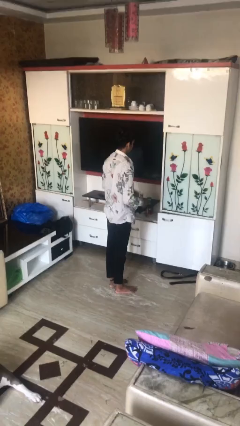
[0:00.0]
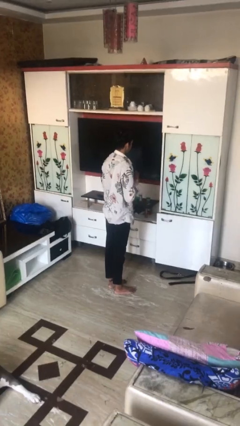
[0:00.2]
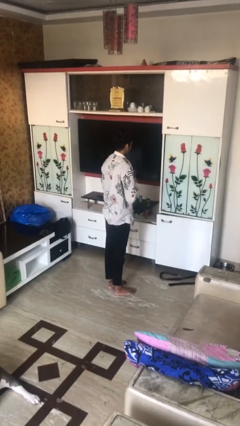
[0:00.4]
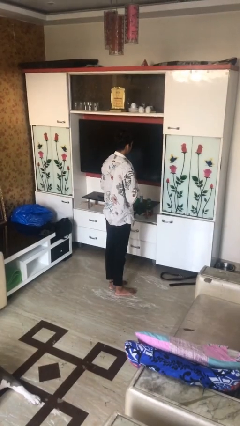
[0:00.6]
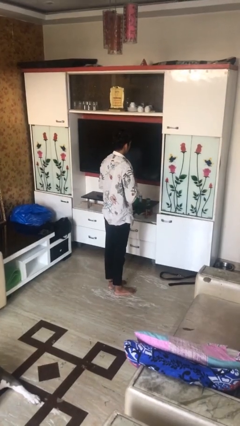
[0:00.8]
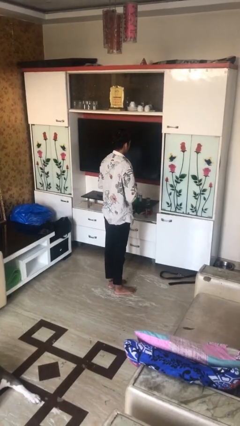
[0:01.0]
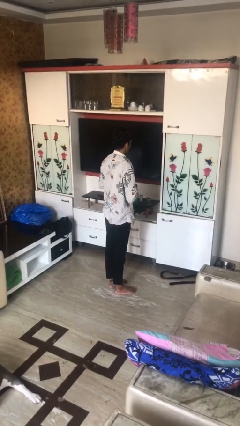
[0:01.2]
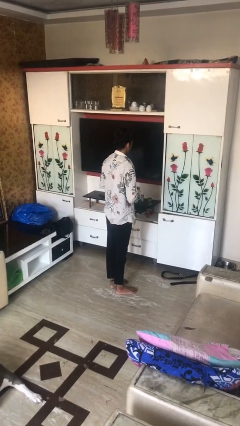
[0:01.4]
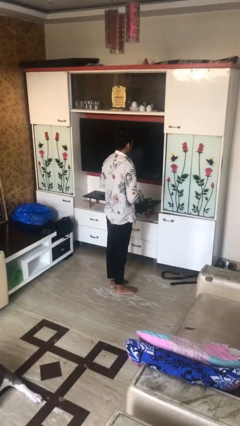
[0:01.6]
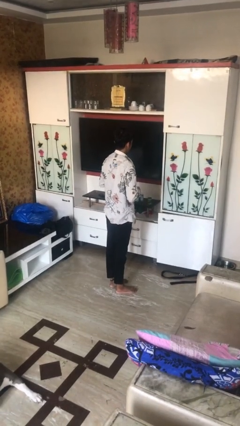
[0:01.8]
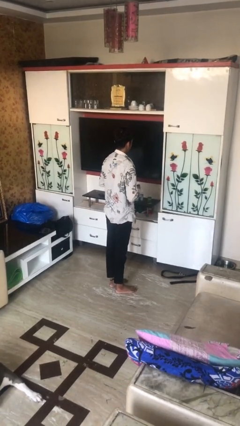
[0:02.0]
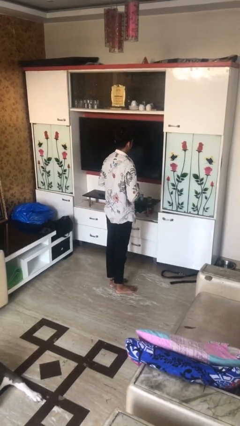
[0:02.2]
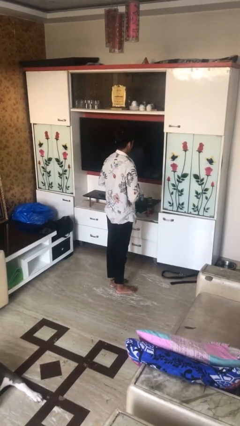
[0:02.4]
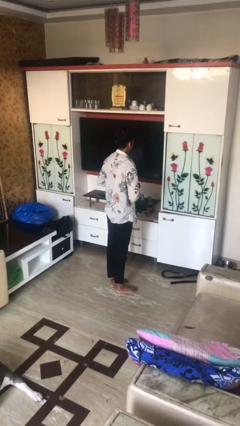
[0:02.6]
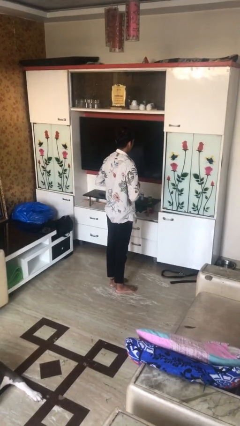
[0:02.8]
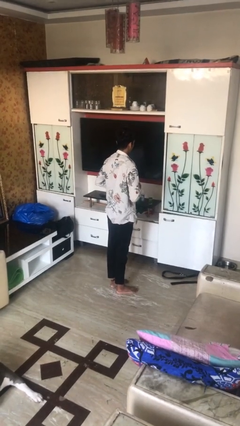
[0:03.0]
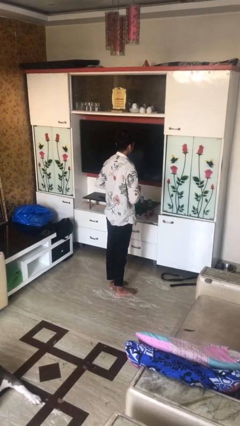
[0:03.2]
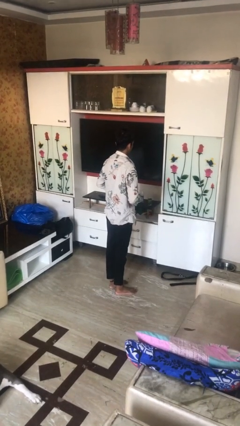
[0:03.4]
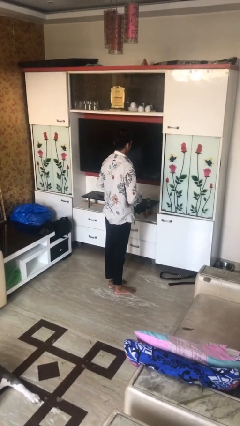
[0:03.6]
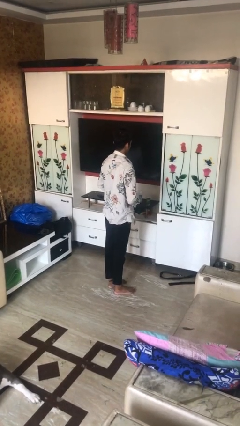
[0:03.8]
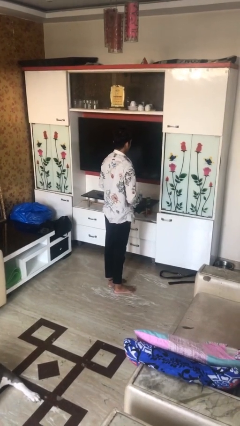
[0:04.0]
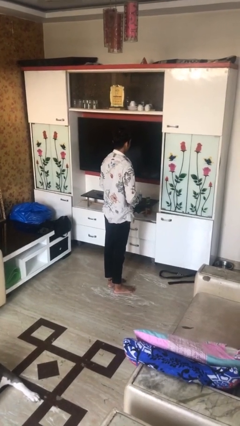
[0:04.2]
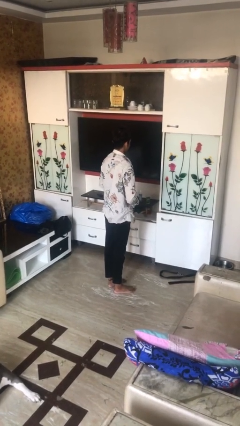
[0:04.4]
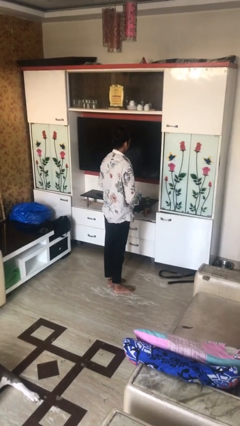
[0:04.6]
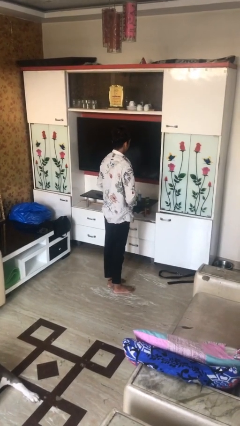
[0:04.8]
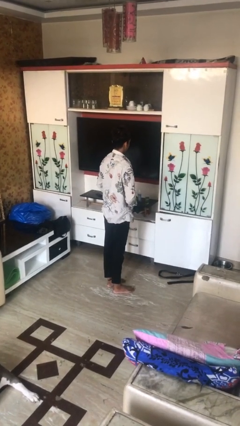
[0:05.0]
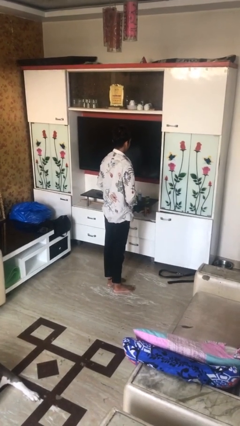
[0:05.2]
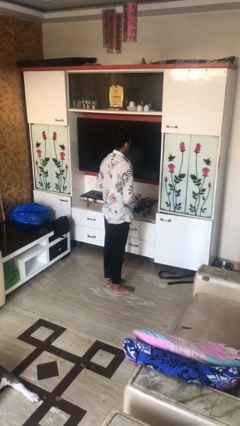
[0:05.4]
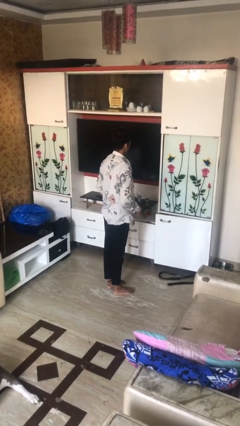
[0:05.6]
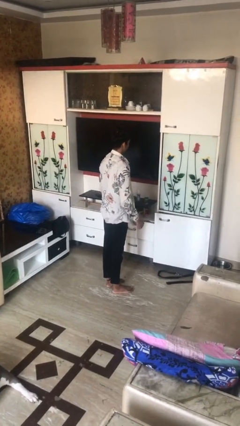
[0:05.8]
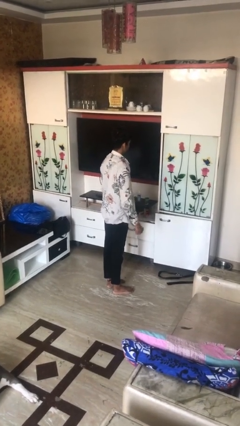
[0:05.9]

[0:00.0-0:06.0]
person unbuttons shirt

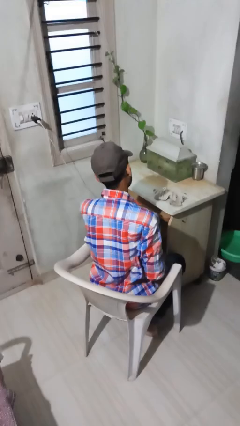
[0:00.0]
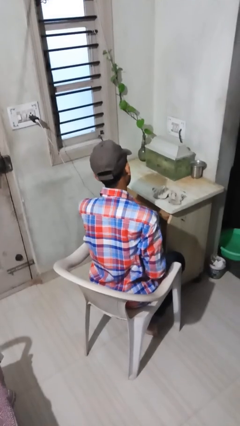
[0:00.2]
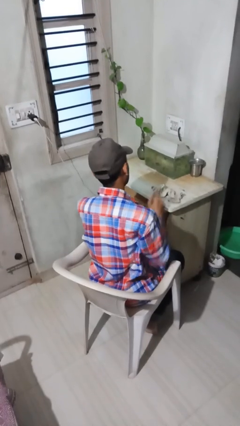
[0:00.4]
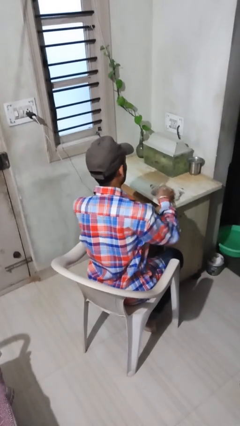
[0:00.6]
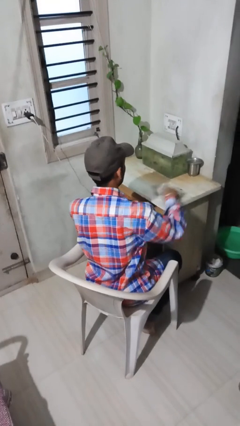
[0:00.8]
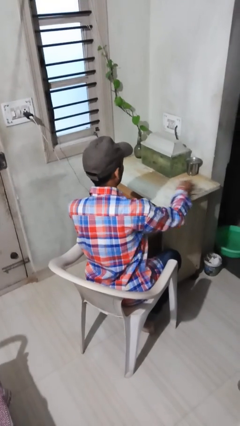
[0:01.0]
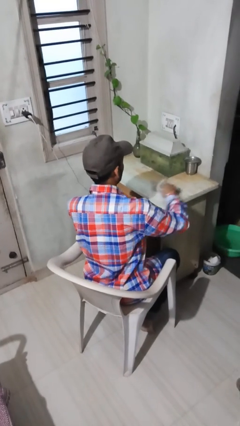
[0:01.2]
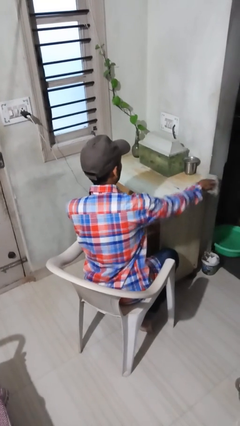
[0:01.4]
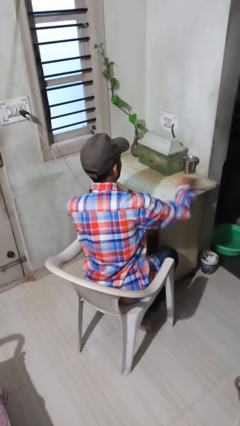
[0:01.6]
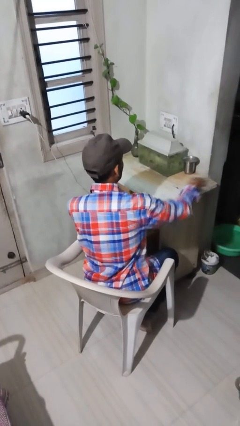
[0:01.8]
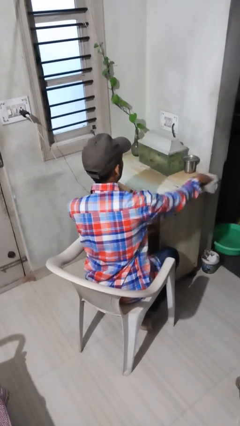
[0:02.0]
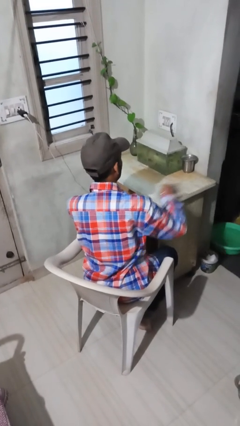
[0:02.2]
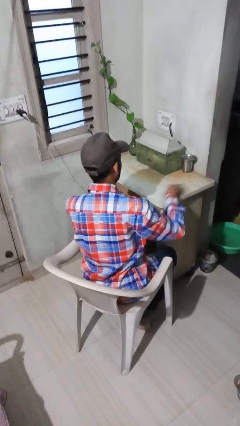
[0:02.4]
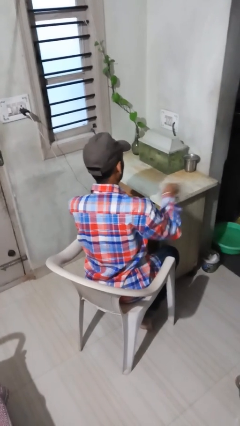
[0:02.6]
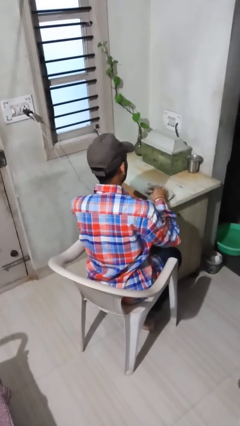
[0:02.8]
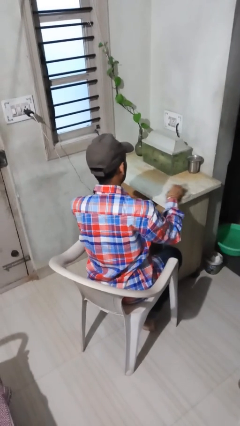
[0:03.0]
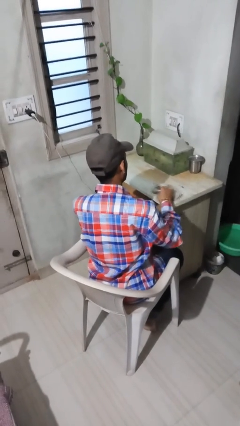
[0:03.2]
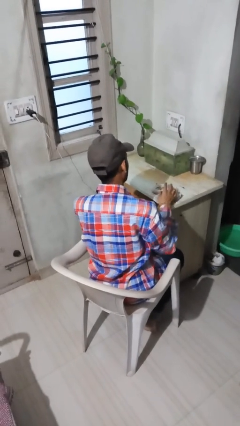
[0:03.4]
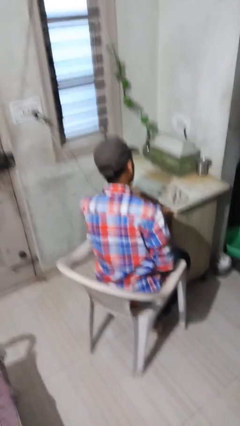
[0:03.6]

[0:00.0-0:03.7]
person cleans table with rag

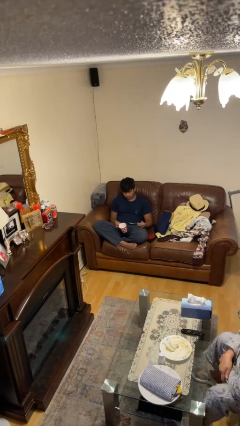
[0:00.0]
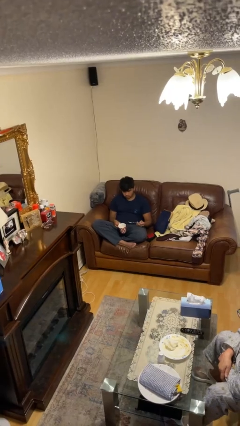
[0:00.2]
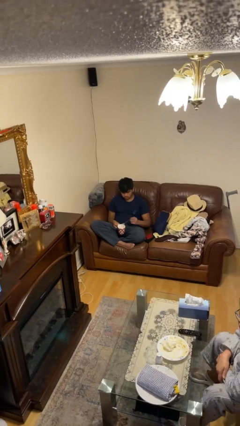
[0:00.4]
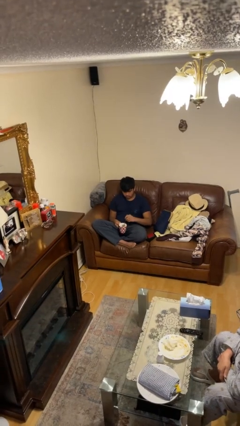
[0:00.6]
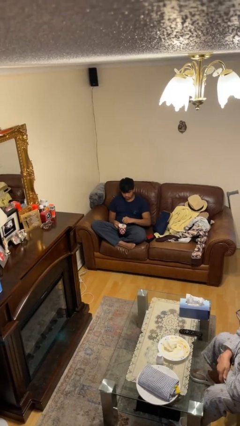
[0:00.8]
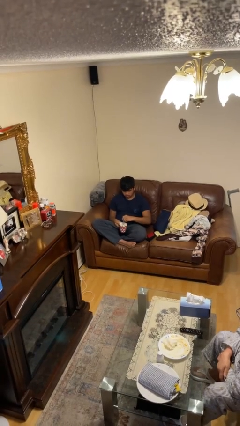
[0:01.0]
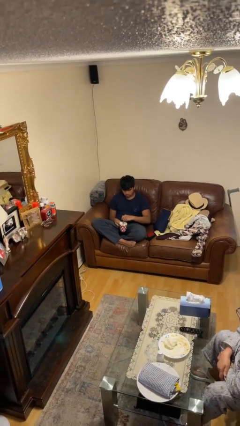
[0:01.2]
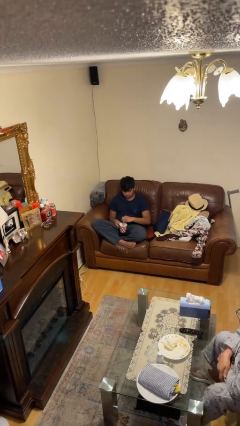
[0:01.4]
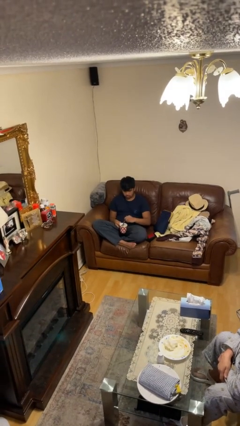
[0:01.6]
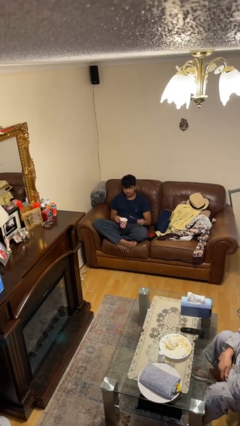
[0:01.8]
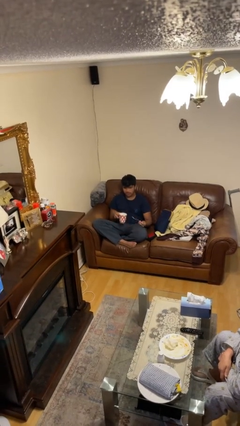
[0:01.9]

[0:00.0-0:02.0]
person stirs mug

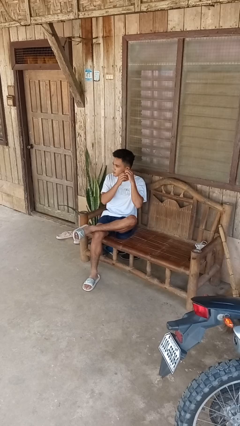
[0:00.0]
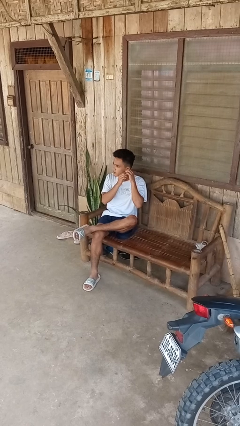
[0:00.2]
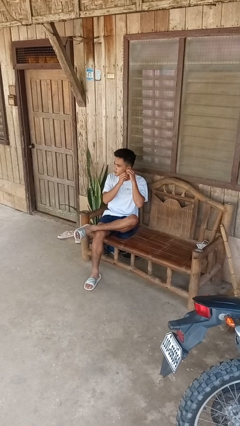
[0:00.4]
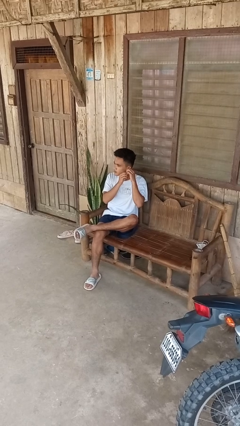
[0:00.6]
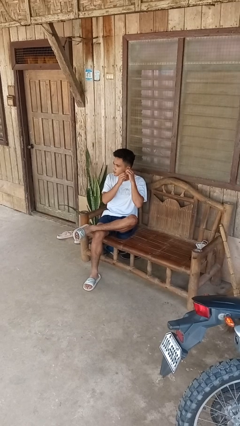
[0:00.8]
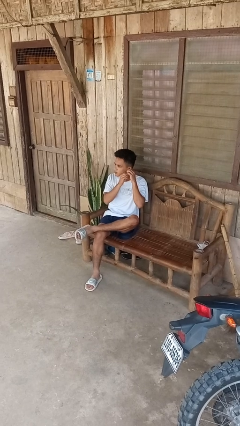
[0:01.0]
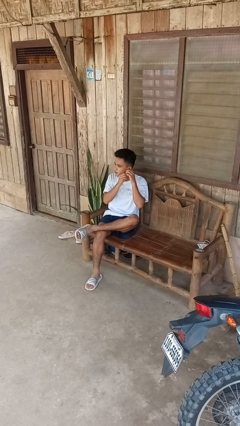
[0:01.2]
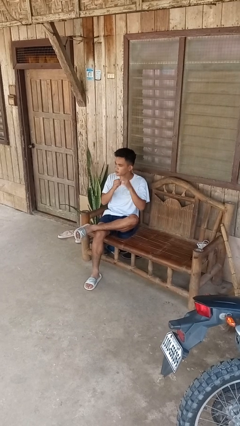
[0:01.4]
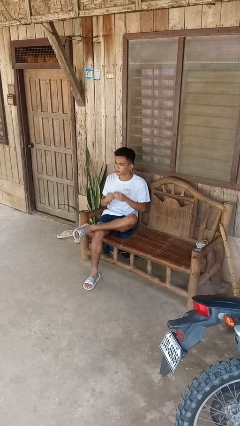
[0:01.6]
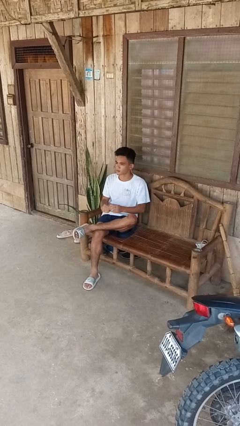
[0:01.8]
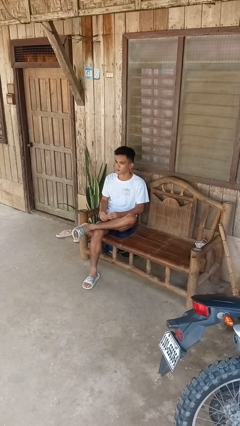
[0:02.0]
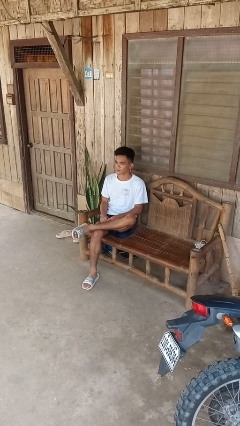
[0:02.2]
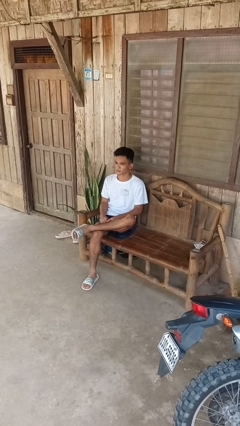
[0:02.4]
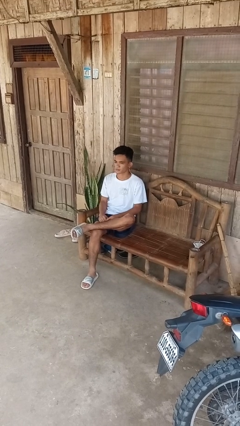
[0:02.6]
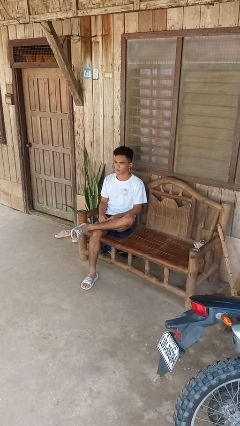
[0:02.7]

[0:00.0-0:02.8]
person takes off earrings

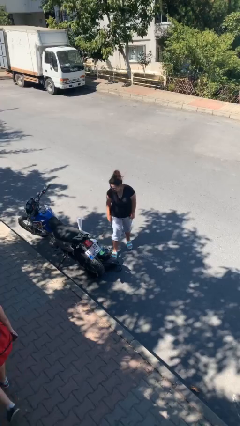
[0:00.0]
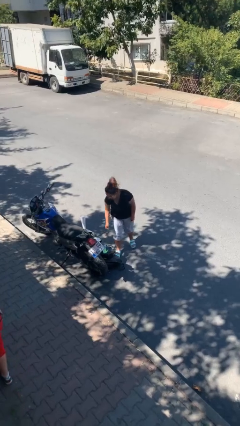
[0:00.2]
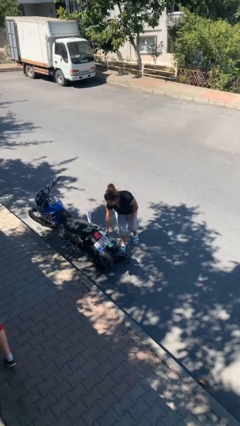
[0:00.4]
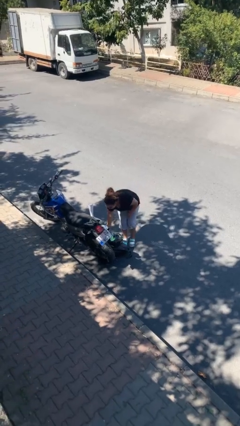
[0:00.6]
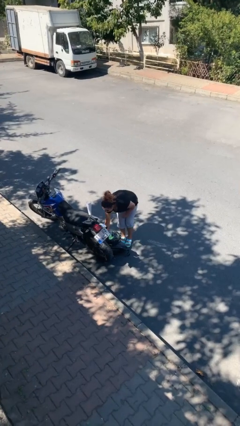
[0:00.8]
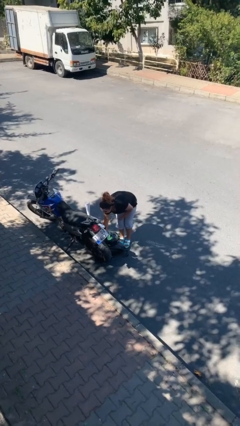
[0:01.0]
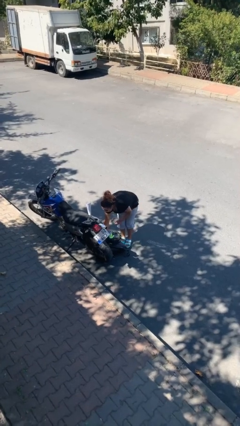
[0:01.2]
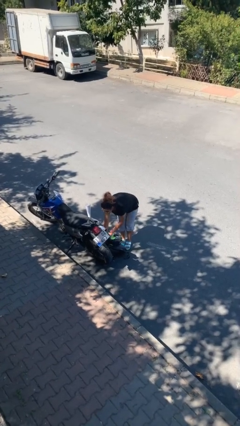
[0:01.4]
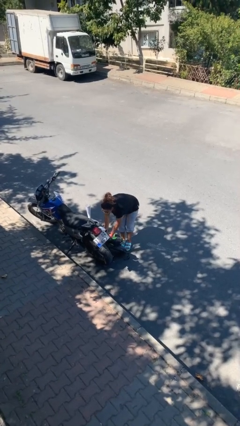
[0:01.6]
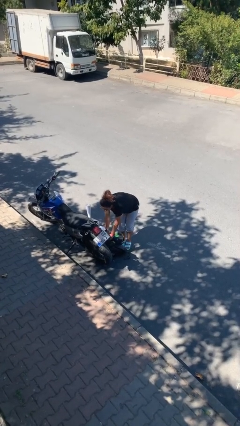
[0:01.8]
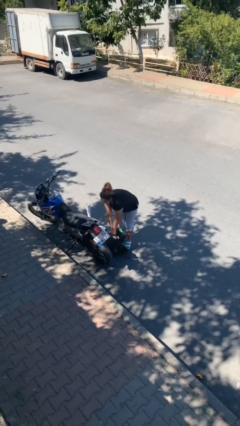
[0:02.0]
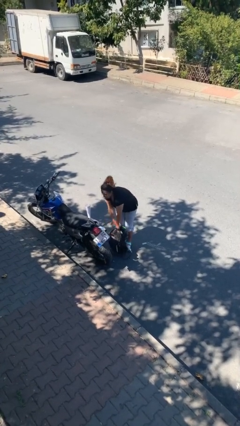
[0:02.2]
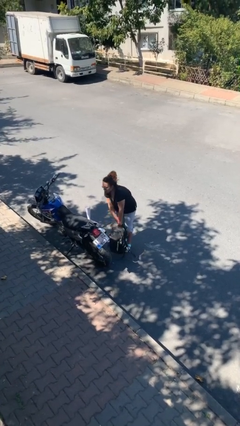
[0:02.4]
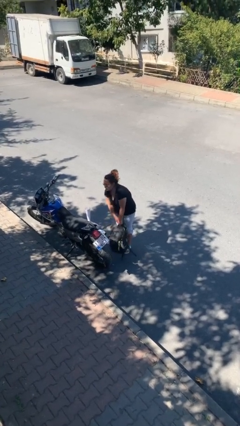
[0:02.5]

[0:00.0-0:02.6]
person picks up object from floor

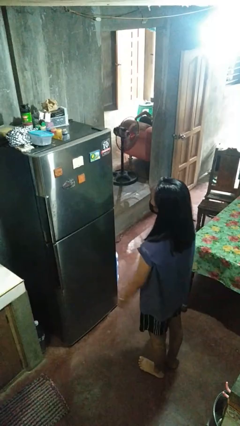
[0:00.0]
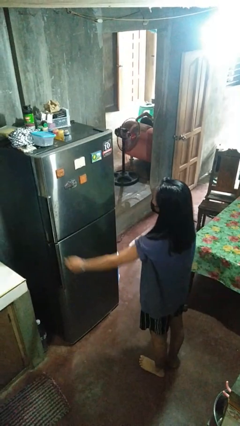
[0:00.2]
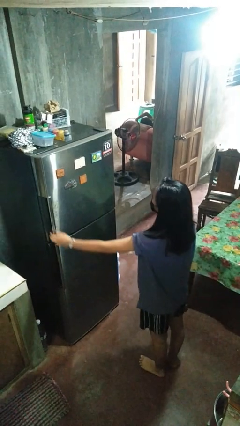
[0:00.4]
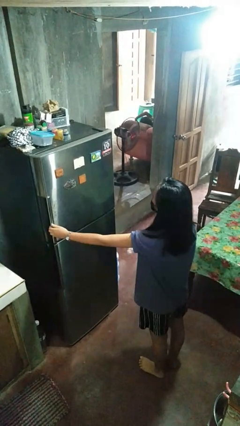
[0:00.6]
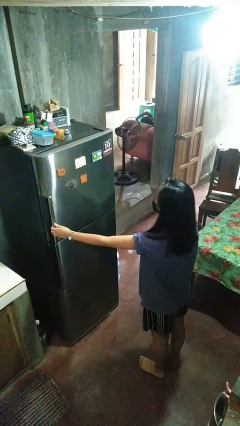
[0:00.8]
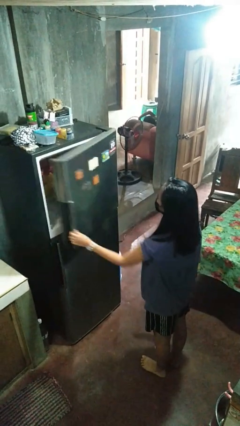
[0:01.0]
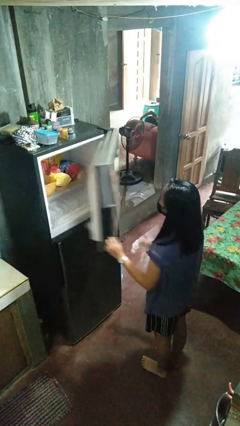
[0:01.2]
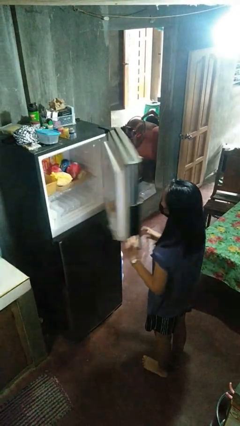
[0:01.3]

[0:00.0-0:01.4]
person opens refrigerator
